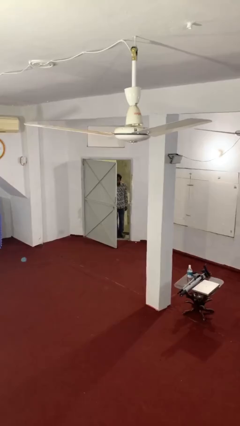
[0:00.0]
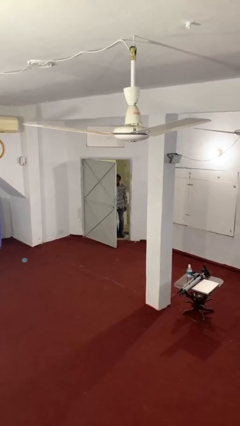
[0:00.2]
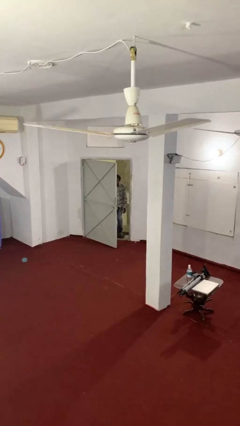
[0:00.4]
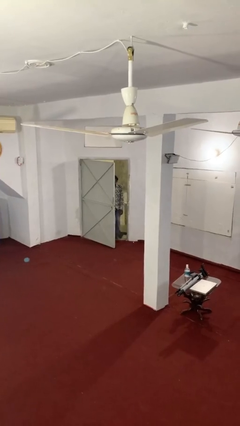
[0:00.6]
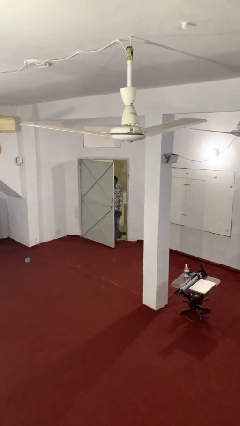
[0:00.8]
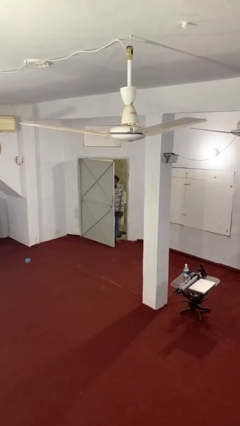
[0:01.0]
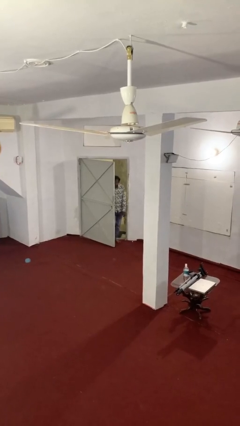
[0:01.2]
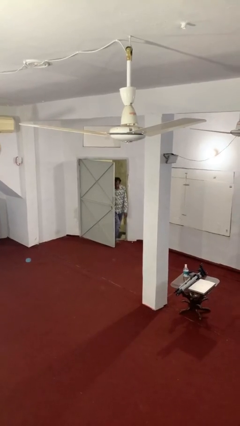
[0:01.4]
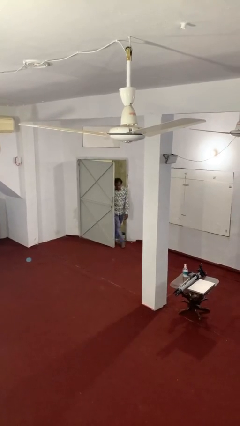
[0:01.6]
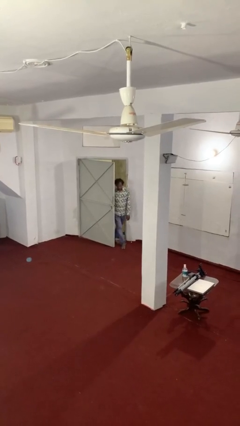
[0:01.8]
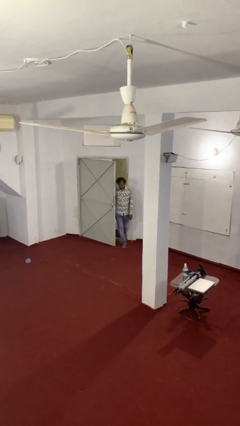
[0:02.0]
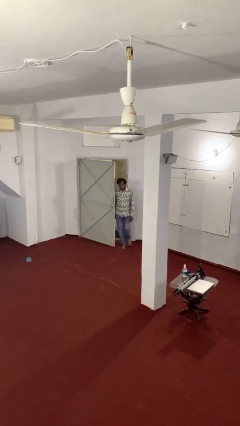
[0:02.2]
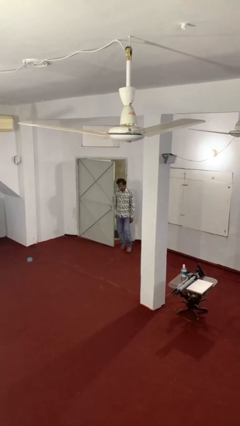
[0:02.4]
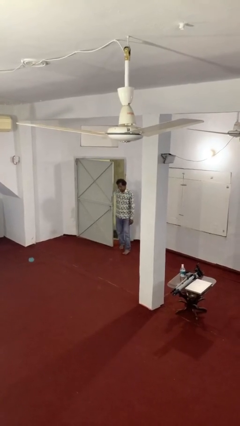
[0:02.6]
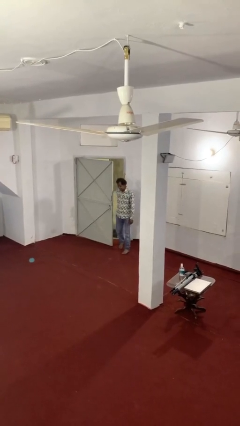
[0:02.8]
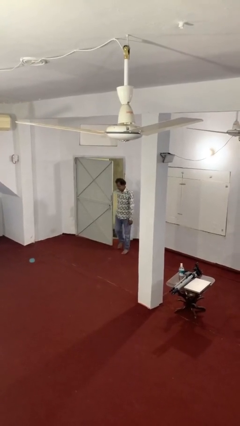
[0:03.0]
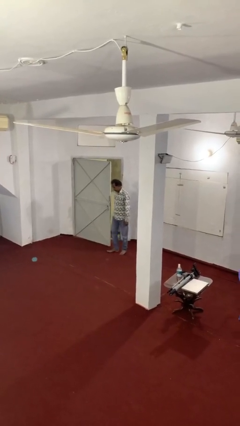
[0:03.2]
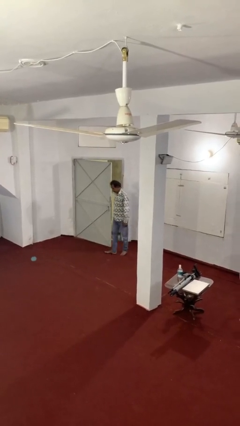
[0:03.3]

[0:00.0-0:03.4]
person enters scene through structure

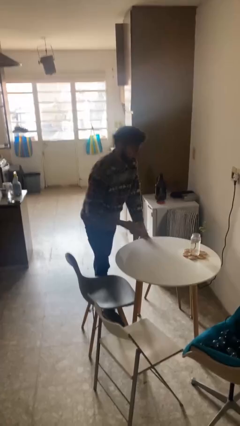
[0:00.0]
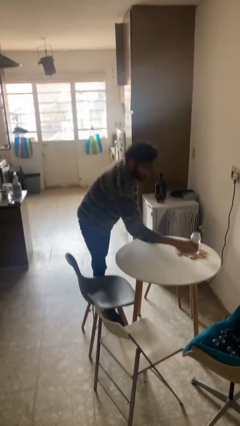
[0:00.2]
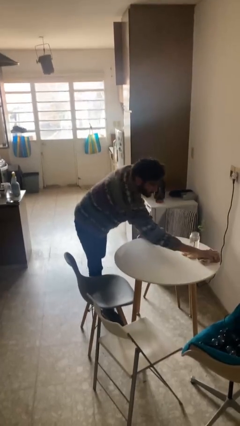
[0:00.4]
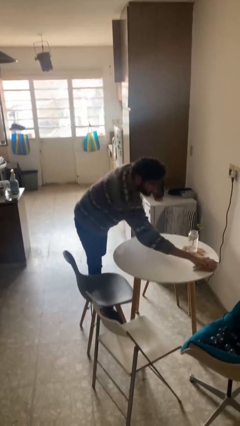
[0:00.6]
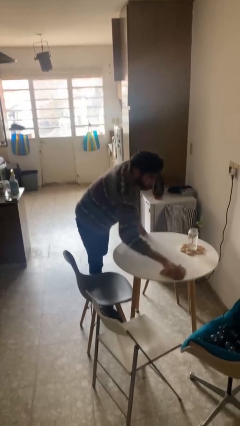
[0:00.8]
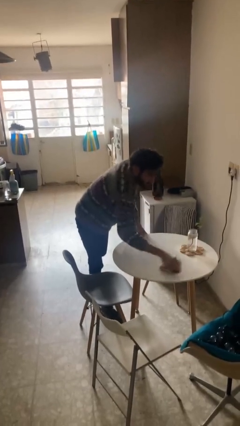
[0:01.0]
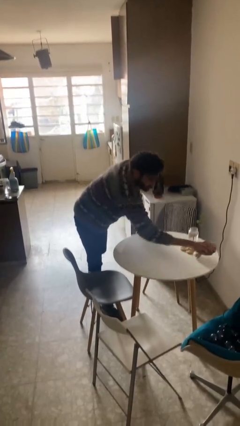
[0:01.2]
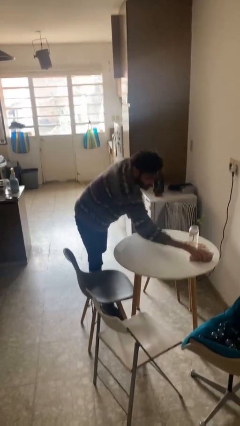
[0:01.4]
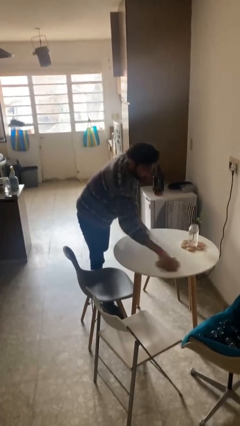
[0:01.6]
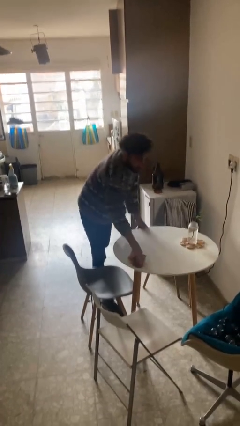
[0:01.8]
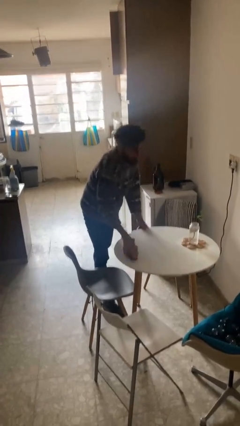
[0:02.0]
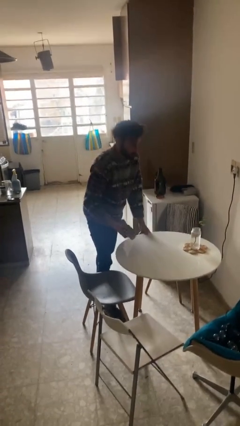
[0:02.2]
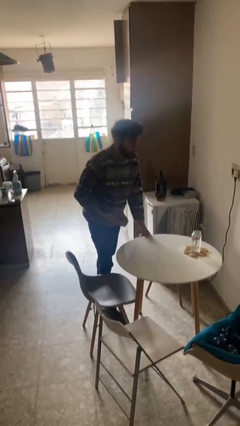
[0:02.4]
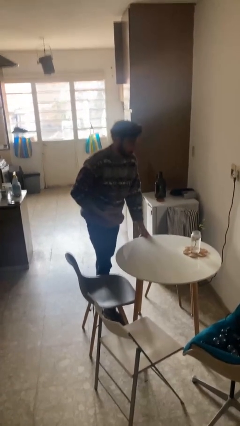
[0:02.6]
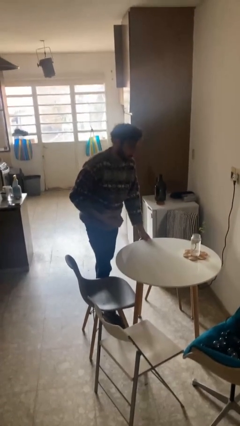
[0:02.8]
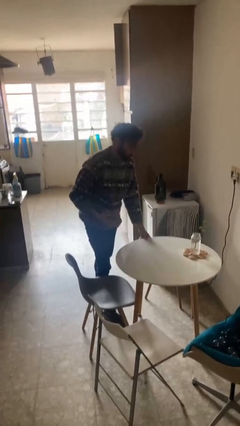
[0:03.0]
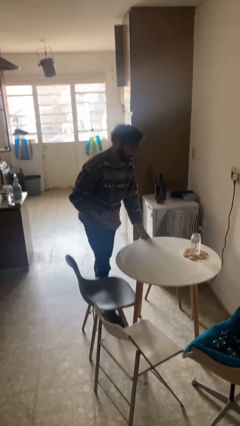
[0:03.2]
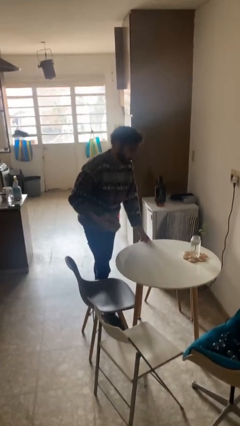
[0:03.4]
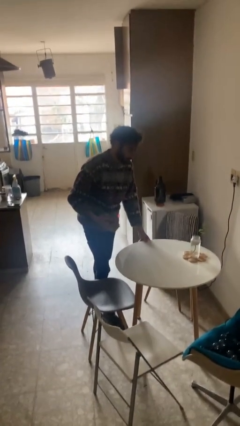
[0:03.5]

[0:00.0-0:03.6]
person cleans table with rag

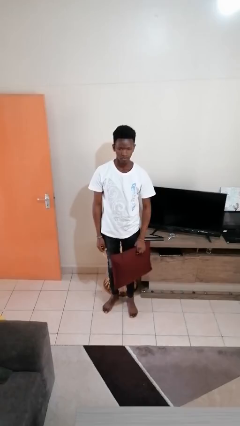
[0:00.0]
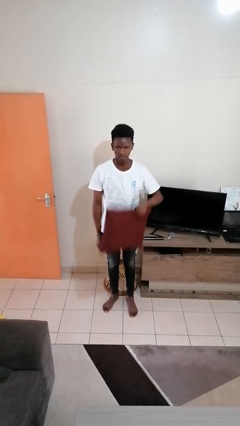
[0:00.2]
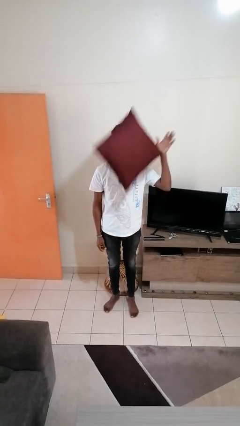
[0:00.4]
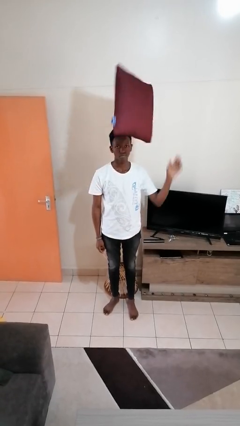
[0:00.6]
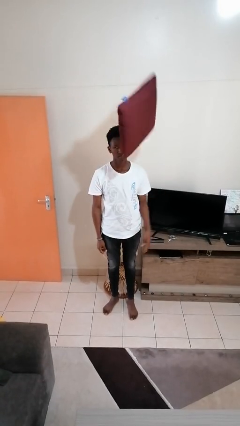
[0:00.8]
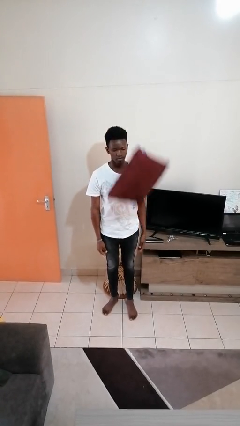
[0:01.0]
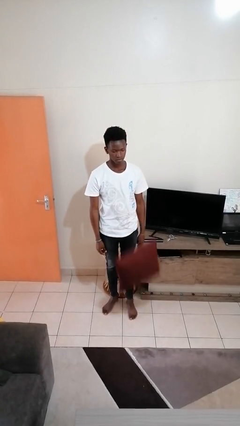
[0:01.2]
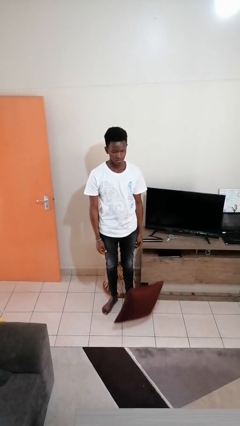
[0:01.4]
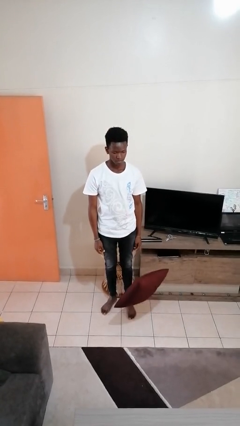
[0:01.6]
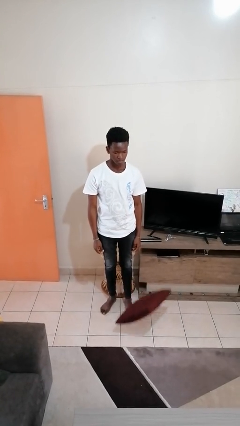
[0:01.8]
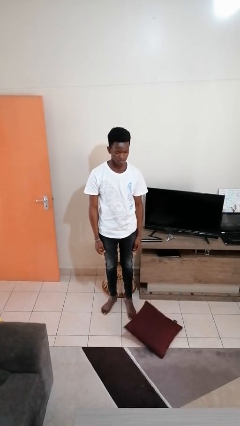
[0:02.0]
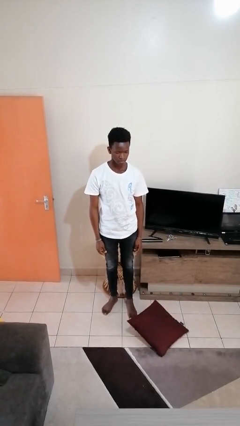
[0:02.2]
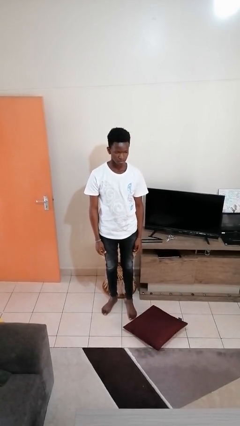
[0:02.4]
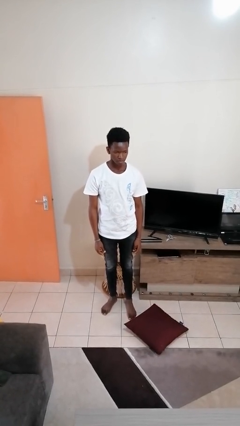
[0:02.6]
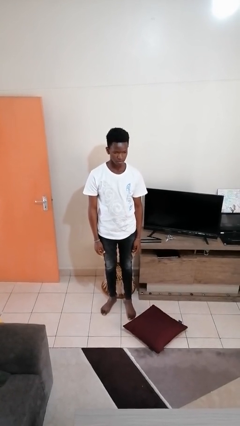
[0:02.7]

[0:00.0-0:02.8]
person throws object into air

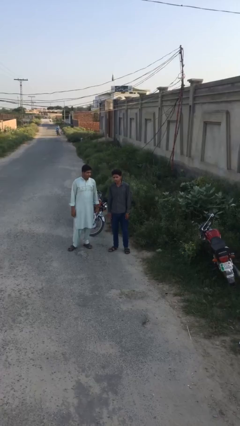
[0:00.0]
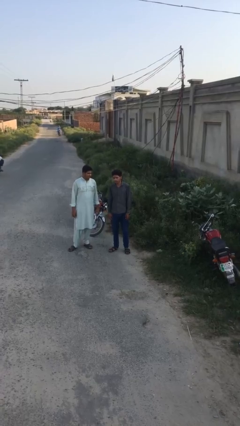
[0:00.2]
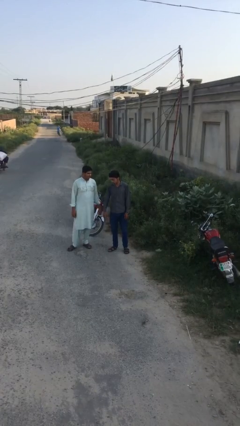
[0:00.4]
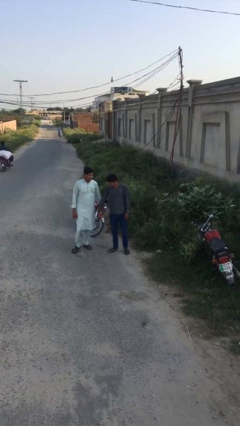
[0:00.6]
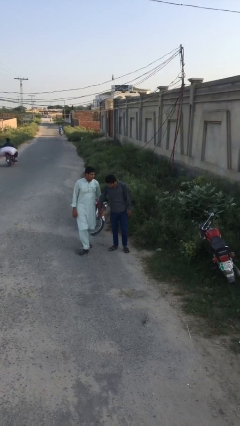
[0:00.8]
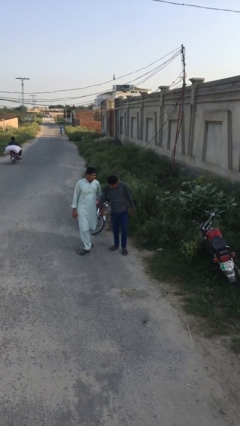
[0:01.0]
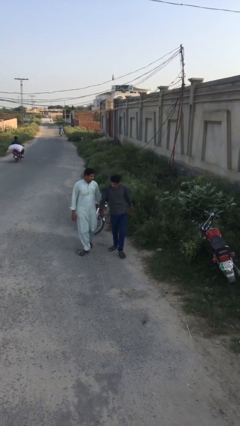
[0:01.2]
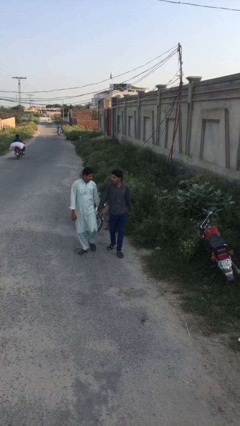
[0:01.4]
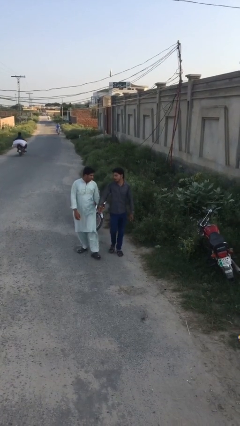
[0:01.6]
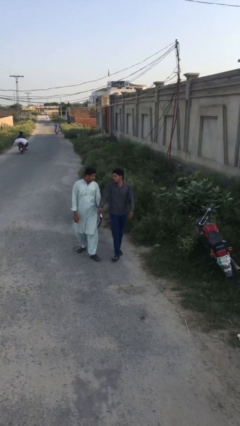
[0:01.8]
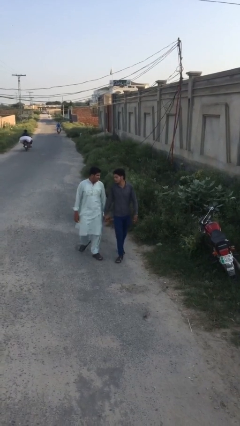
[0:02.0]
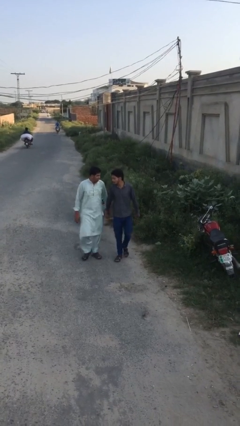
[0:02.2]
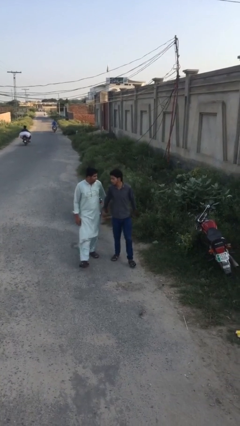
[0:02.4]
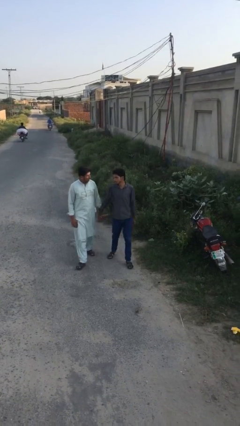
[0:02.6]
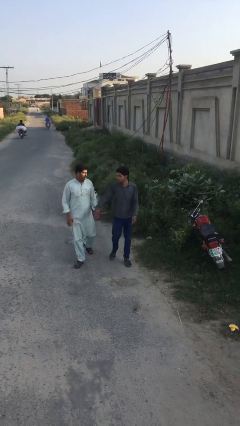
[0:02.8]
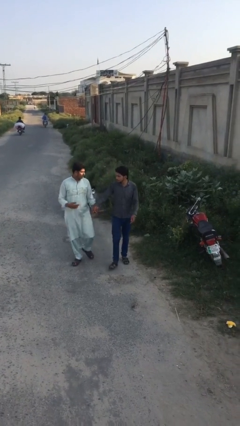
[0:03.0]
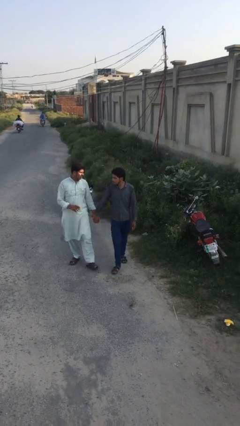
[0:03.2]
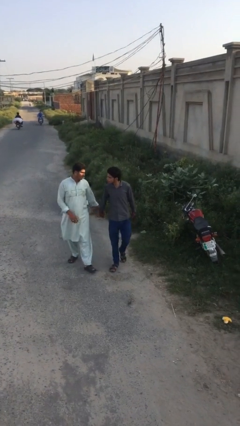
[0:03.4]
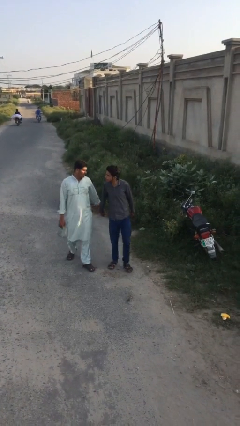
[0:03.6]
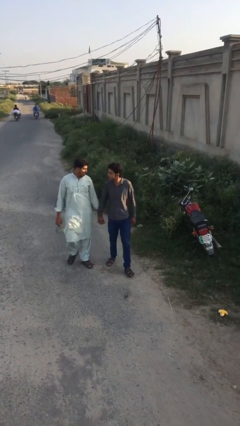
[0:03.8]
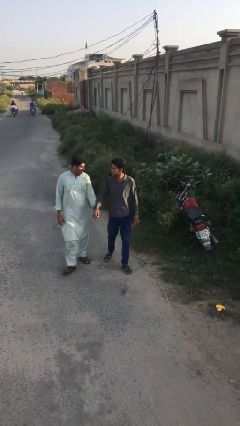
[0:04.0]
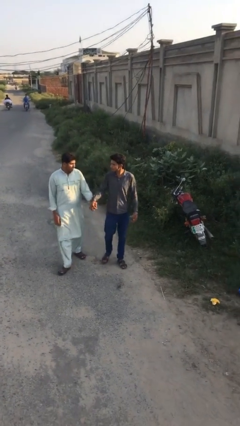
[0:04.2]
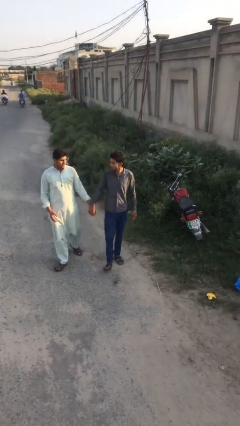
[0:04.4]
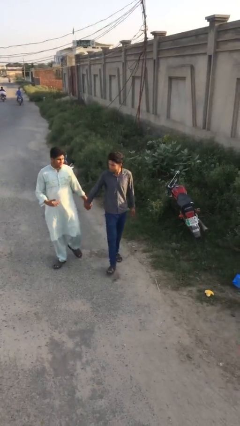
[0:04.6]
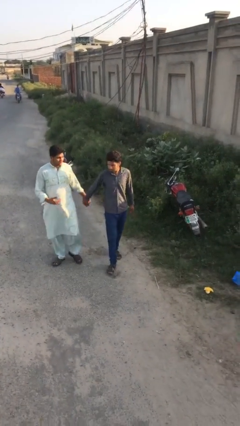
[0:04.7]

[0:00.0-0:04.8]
person holds hand

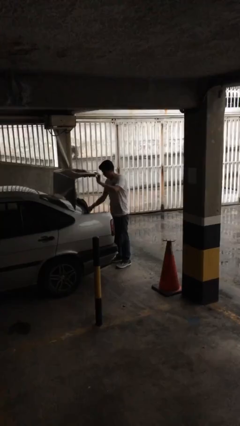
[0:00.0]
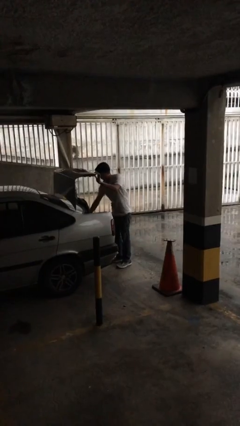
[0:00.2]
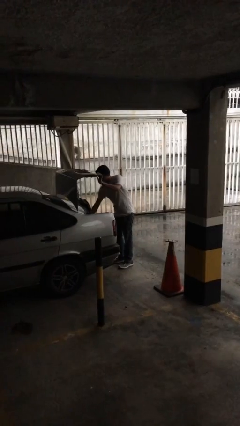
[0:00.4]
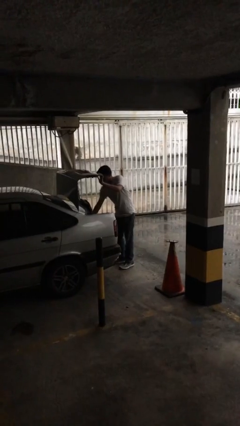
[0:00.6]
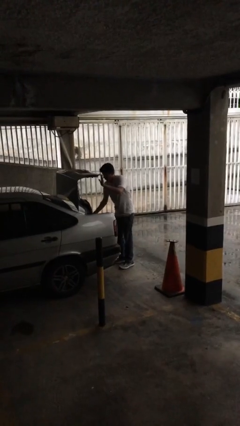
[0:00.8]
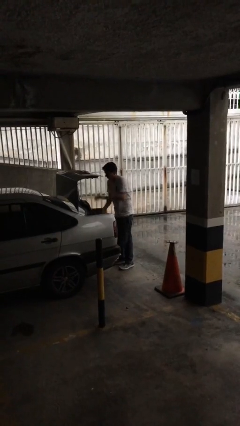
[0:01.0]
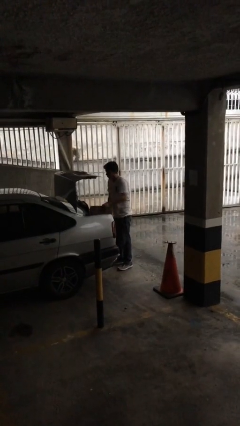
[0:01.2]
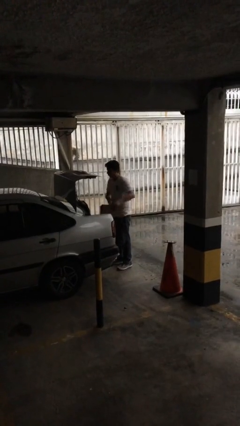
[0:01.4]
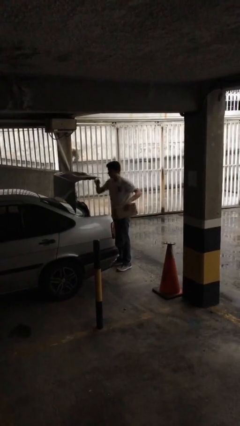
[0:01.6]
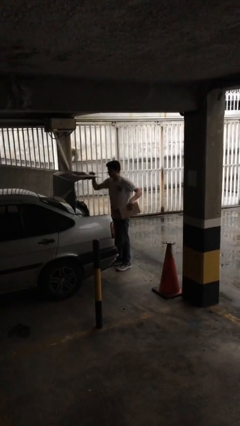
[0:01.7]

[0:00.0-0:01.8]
person unloads car

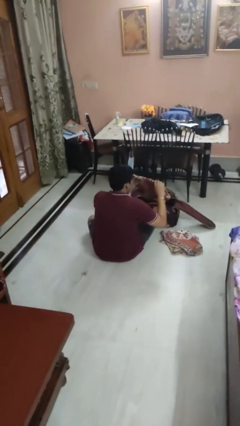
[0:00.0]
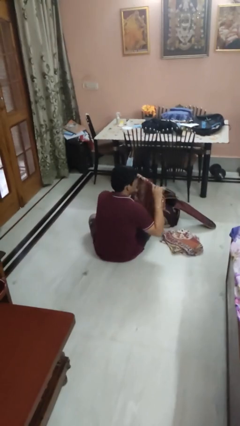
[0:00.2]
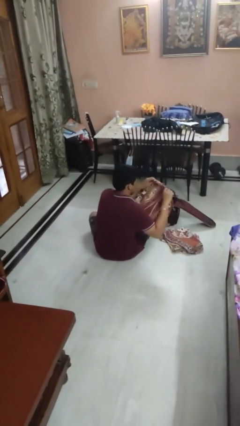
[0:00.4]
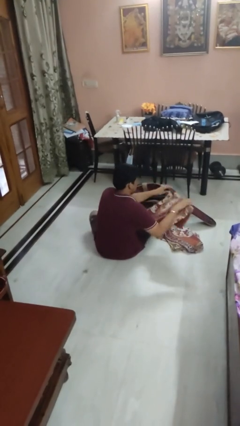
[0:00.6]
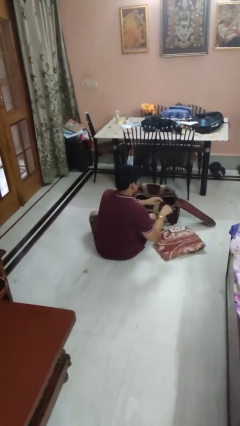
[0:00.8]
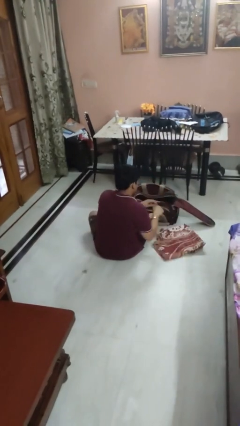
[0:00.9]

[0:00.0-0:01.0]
person unloads clothes from suitcase

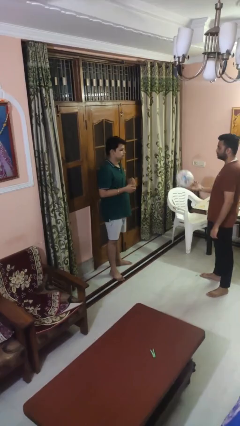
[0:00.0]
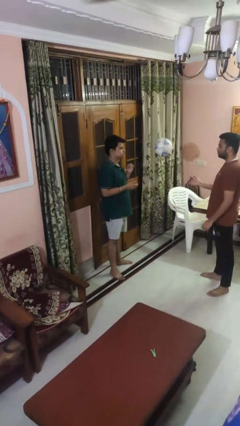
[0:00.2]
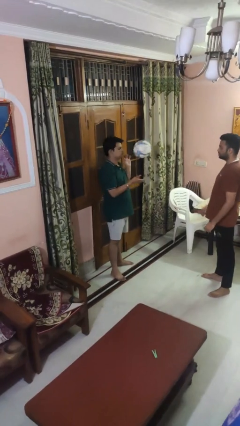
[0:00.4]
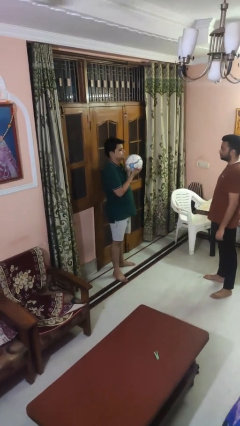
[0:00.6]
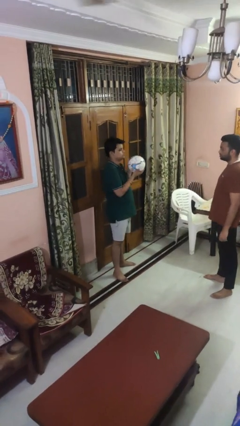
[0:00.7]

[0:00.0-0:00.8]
person catches object from person
